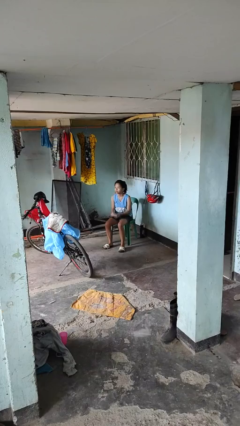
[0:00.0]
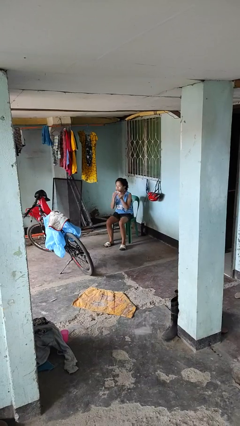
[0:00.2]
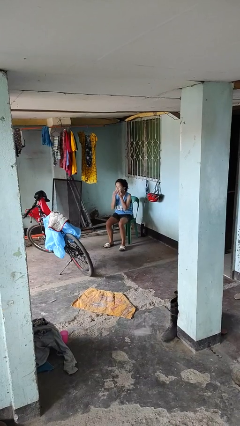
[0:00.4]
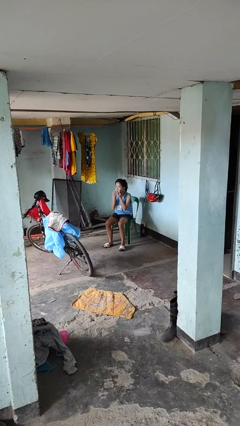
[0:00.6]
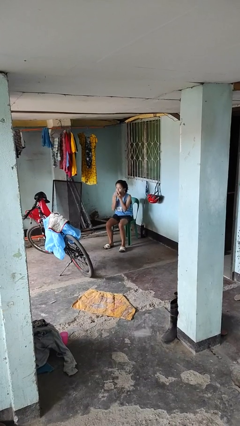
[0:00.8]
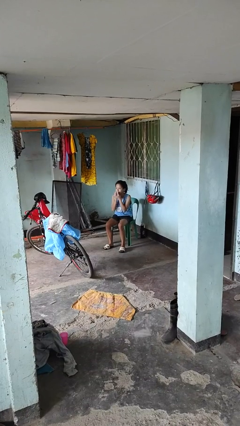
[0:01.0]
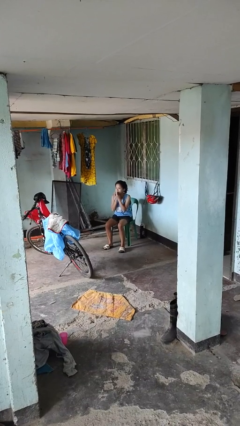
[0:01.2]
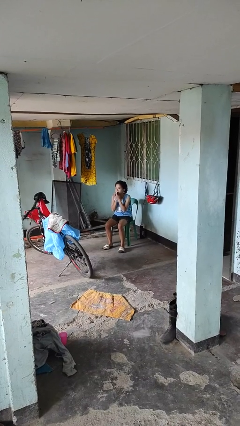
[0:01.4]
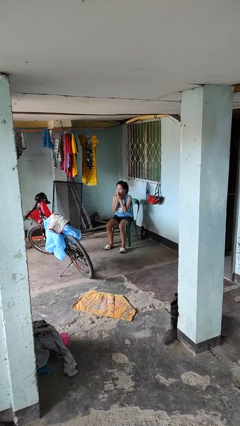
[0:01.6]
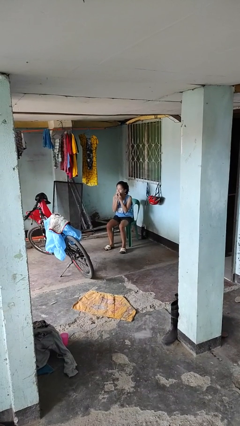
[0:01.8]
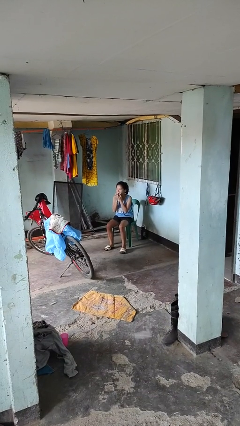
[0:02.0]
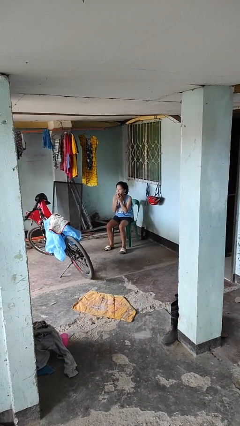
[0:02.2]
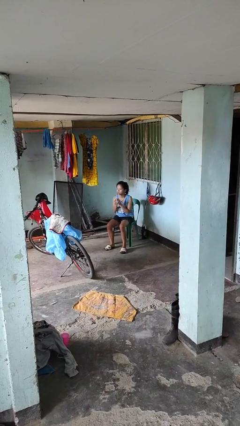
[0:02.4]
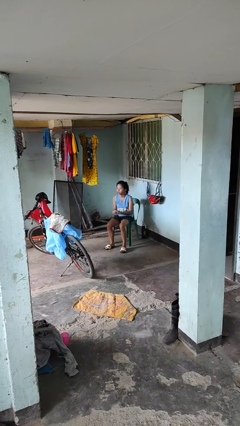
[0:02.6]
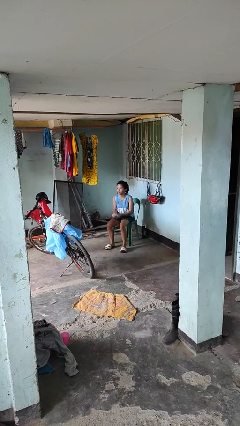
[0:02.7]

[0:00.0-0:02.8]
person wipes mouth with napkin

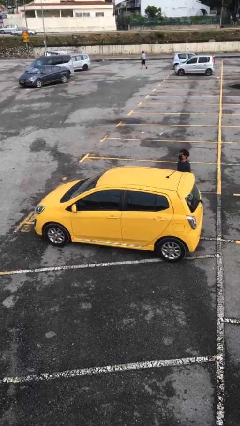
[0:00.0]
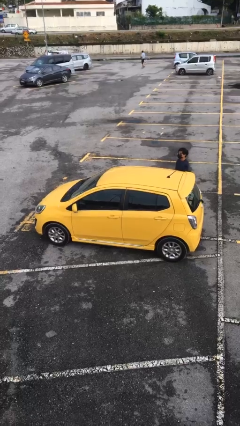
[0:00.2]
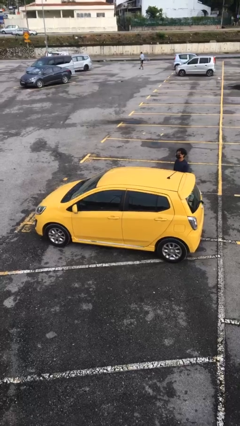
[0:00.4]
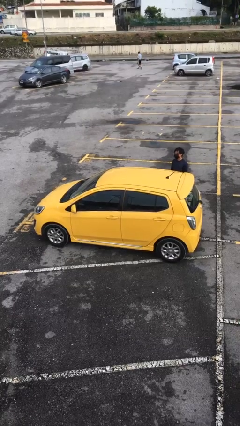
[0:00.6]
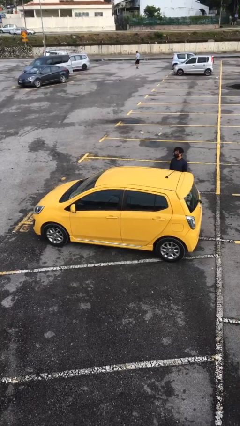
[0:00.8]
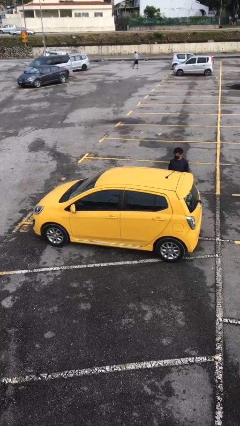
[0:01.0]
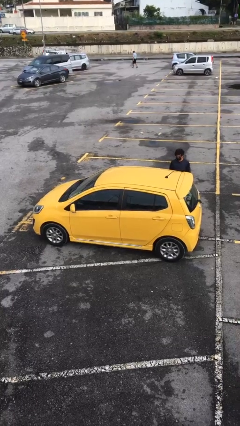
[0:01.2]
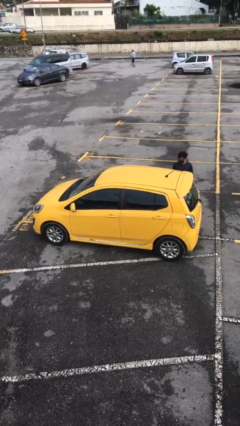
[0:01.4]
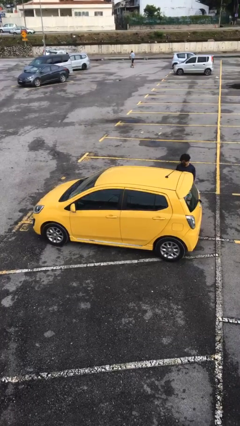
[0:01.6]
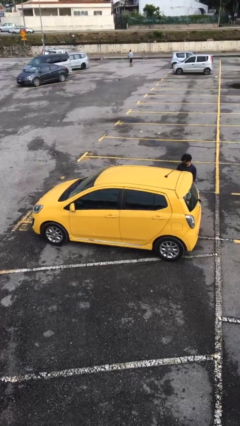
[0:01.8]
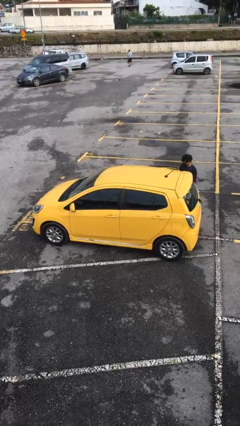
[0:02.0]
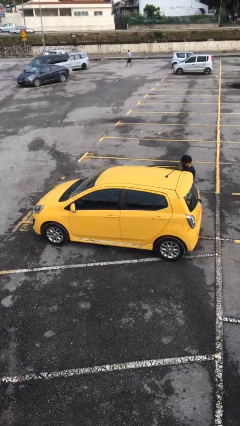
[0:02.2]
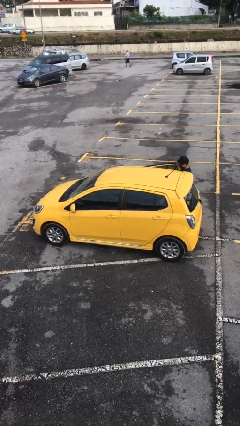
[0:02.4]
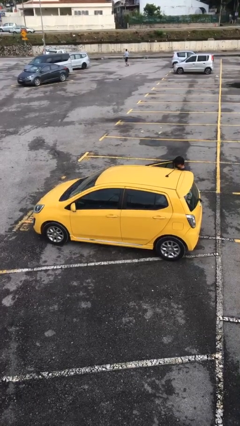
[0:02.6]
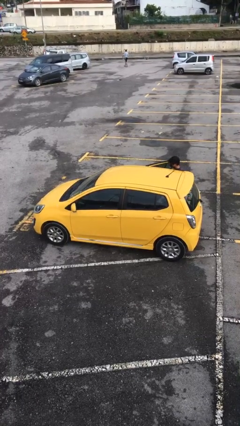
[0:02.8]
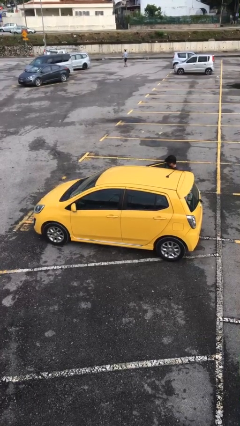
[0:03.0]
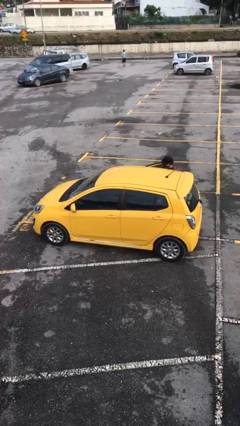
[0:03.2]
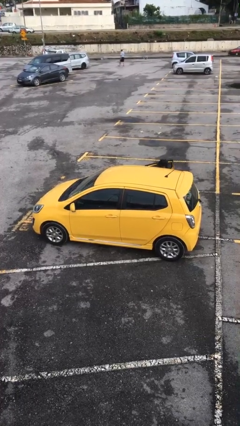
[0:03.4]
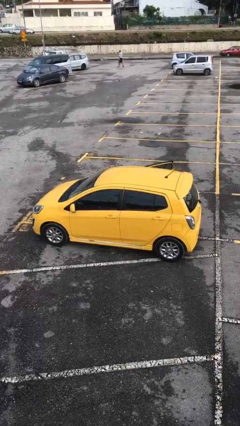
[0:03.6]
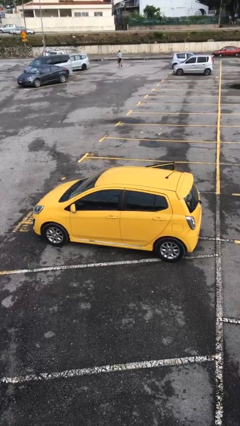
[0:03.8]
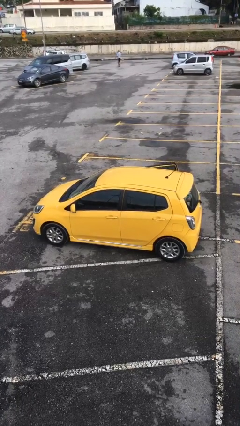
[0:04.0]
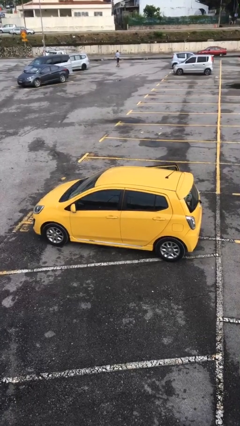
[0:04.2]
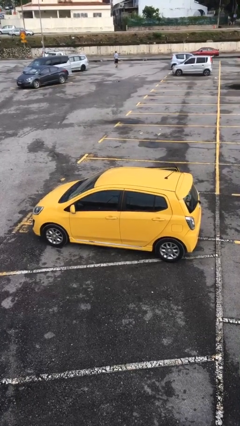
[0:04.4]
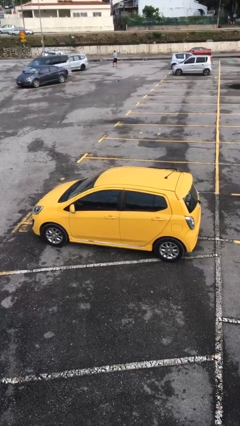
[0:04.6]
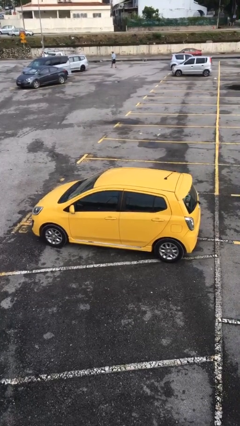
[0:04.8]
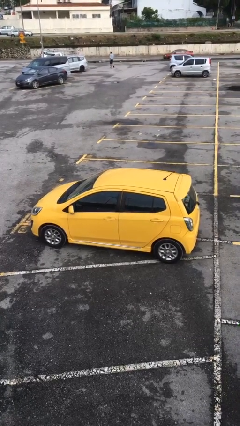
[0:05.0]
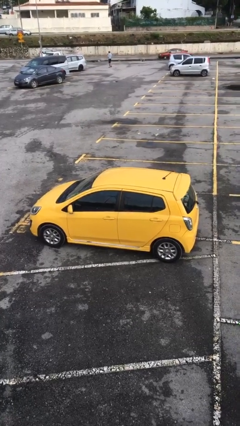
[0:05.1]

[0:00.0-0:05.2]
car picks up person

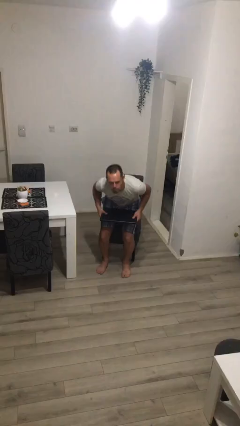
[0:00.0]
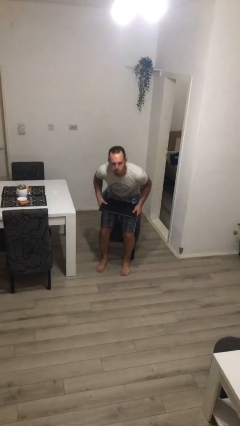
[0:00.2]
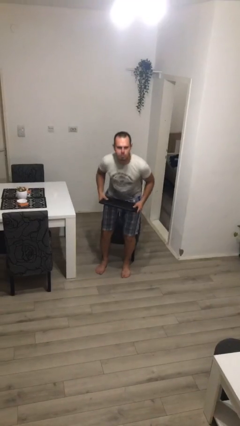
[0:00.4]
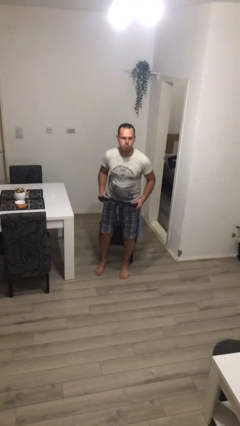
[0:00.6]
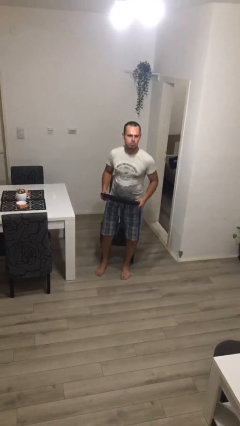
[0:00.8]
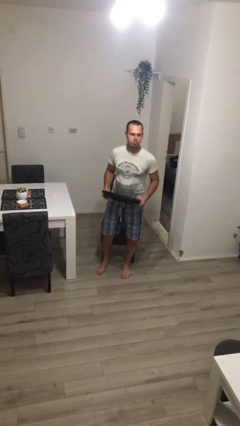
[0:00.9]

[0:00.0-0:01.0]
person stands up

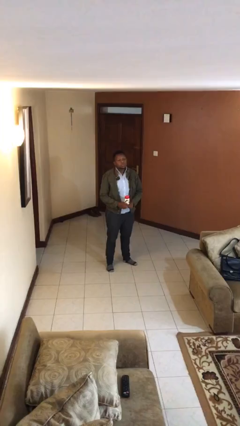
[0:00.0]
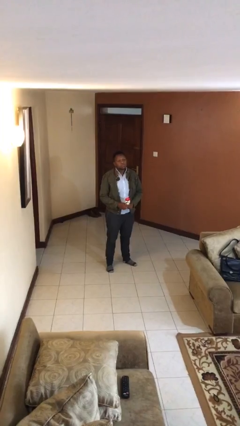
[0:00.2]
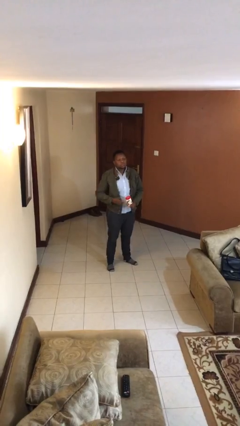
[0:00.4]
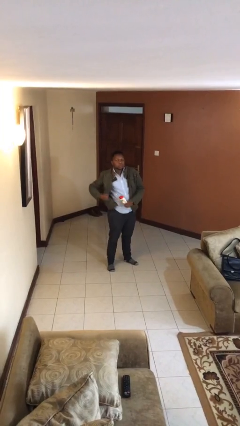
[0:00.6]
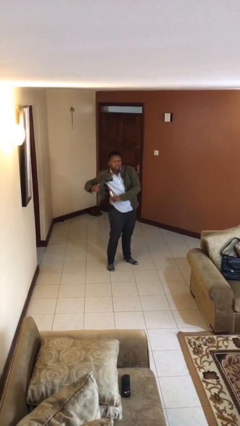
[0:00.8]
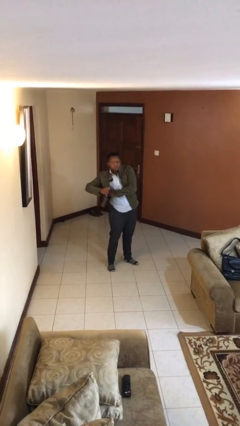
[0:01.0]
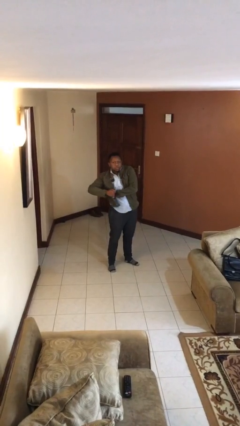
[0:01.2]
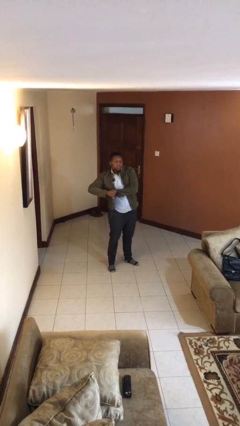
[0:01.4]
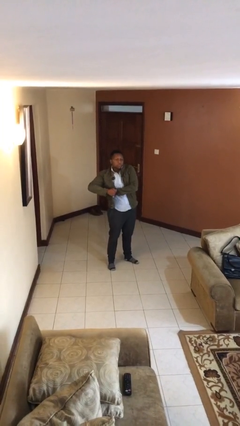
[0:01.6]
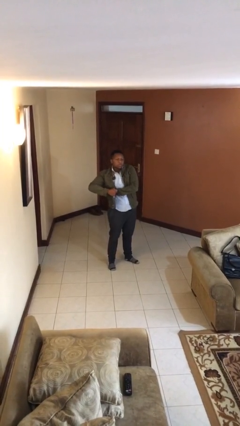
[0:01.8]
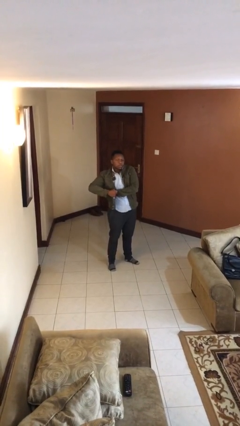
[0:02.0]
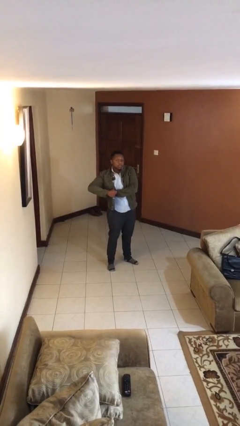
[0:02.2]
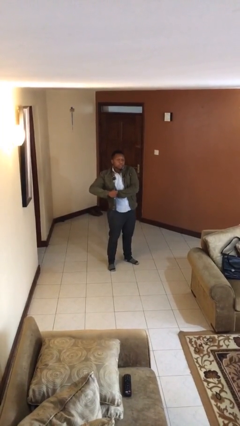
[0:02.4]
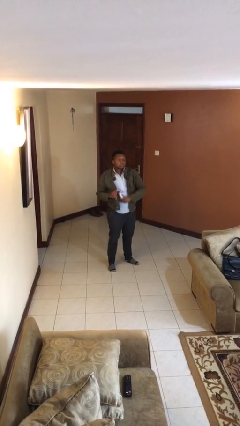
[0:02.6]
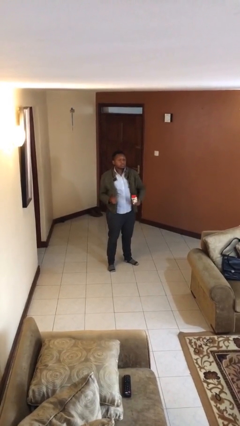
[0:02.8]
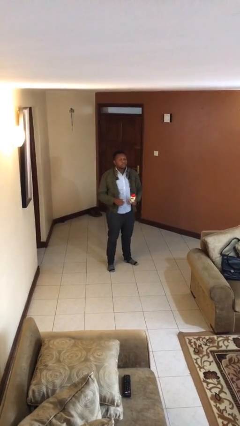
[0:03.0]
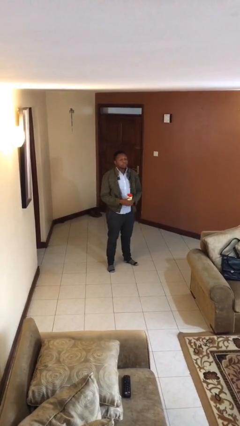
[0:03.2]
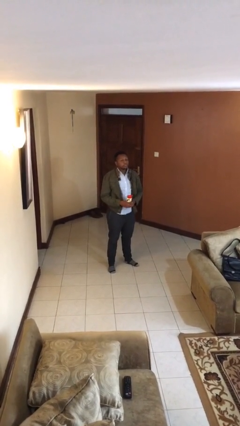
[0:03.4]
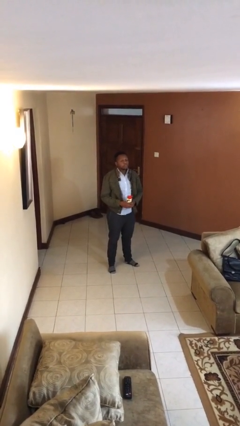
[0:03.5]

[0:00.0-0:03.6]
person applies deodorant

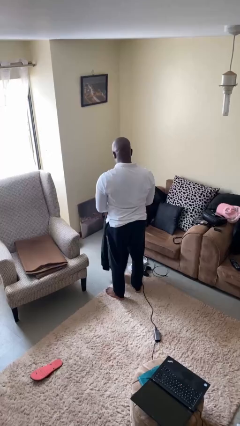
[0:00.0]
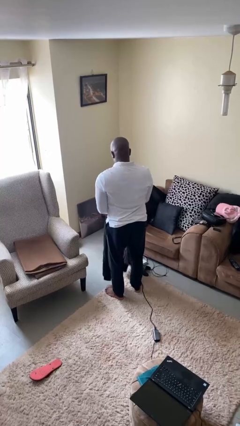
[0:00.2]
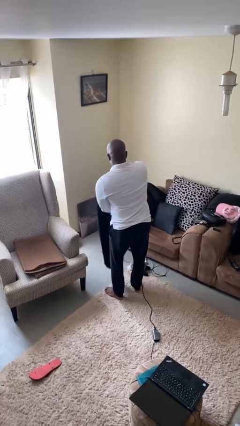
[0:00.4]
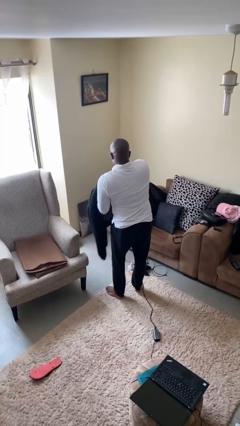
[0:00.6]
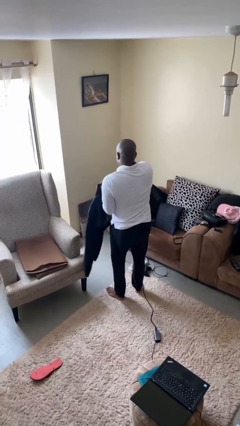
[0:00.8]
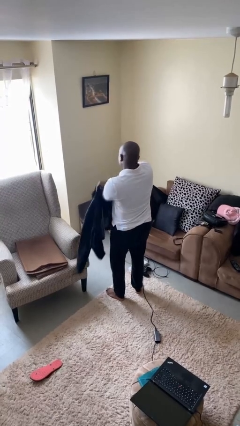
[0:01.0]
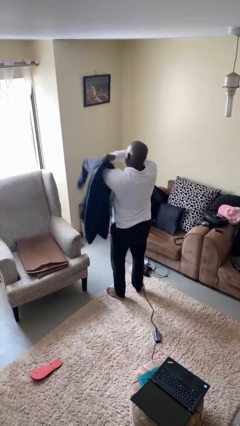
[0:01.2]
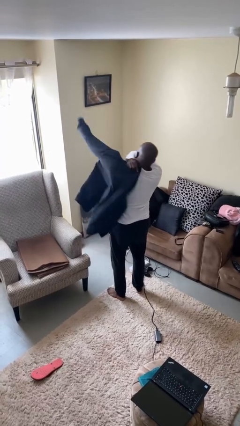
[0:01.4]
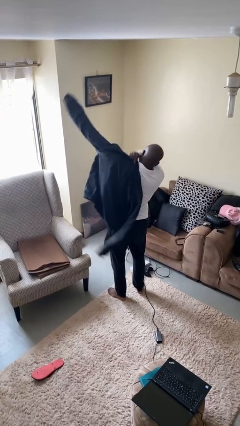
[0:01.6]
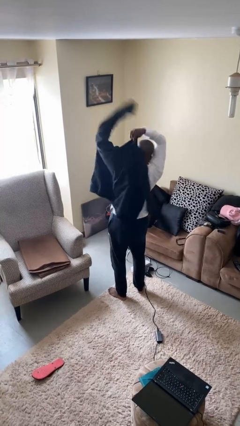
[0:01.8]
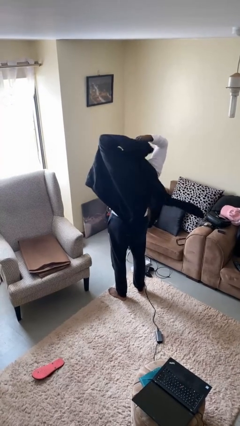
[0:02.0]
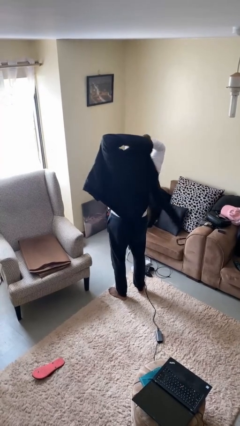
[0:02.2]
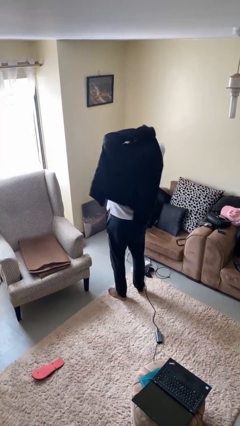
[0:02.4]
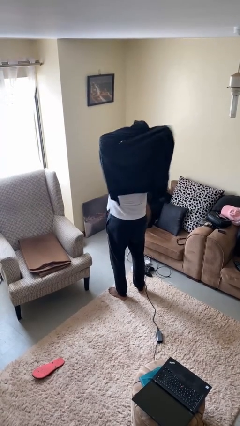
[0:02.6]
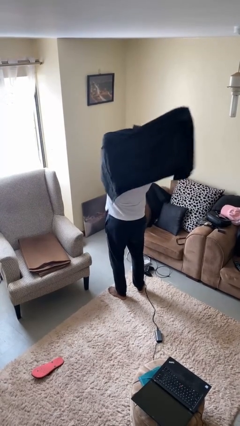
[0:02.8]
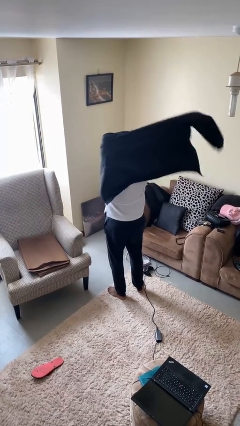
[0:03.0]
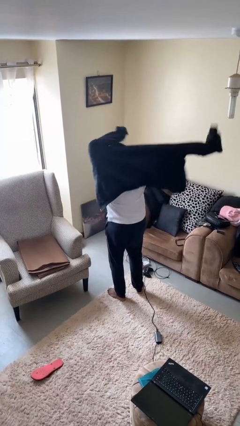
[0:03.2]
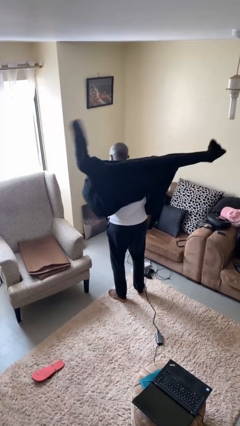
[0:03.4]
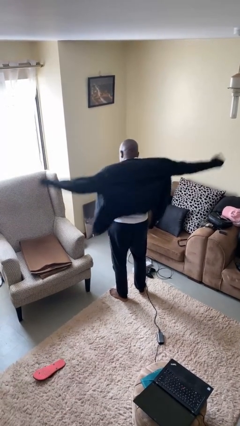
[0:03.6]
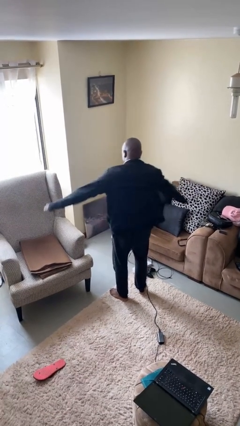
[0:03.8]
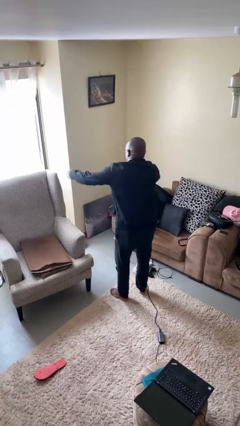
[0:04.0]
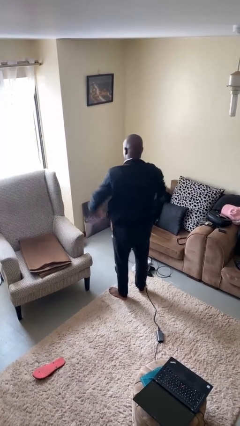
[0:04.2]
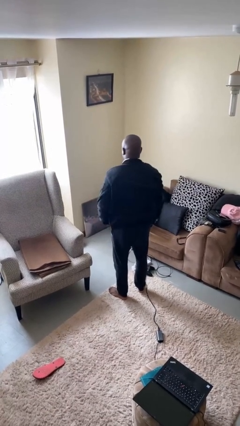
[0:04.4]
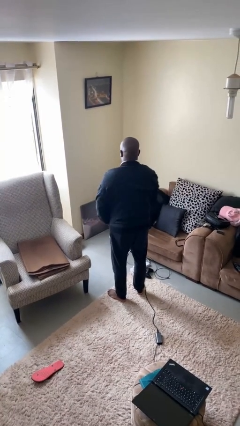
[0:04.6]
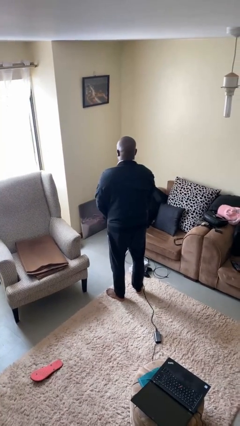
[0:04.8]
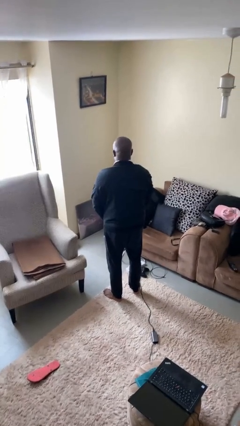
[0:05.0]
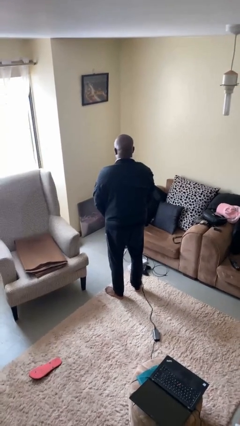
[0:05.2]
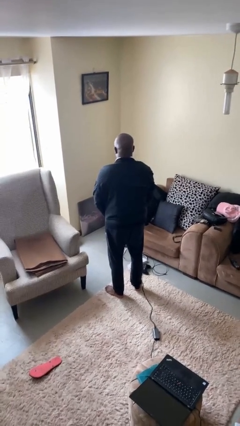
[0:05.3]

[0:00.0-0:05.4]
person puts on jacket
